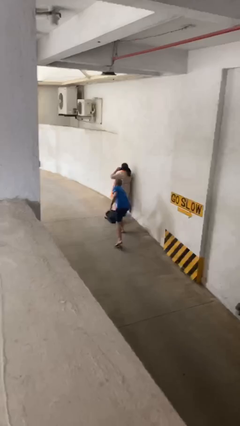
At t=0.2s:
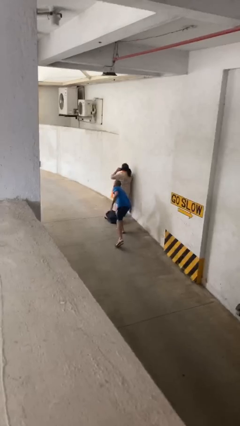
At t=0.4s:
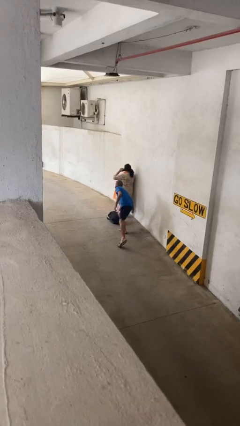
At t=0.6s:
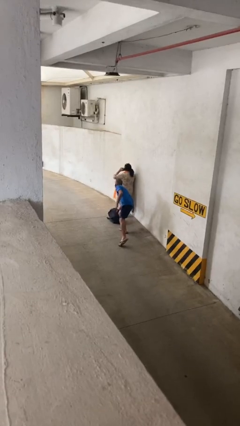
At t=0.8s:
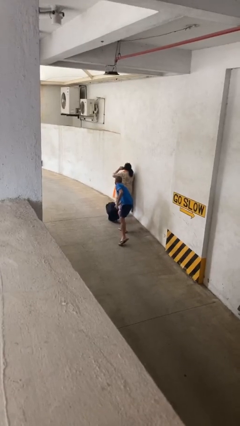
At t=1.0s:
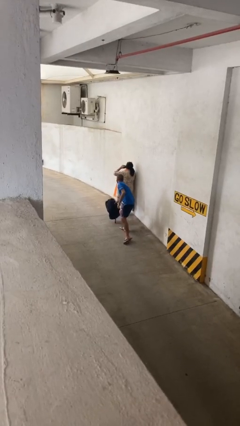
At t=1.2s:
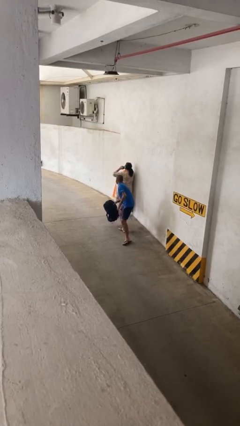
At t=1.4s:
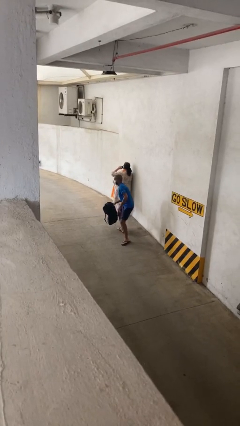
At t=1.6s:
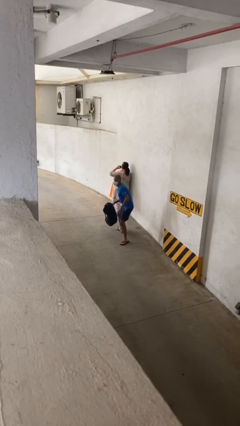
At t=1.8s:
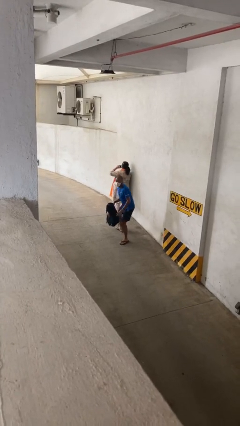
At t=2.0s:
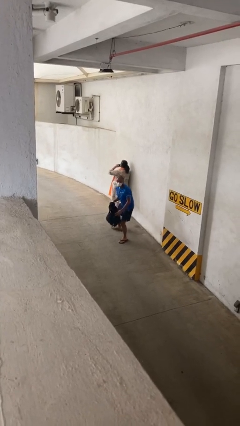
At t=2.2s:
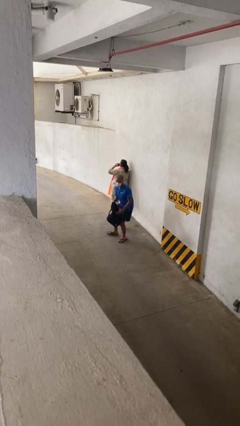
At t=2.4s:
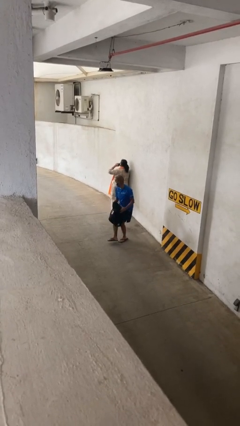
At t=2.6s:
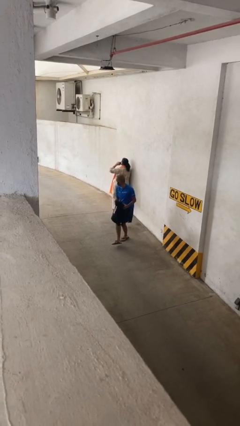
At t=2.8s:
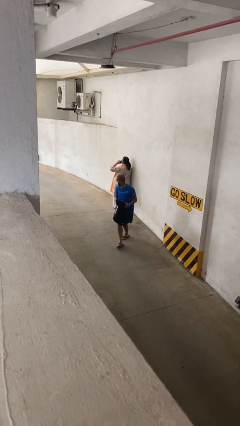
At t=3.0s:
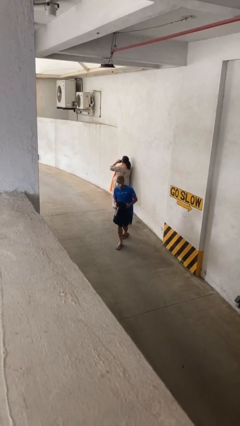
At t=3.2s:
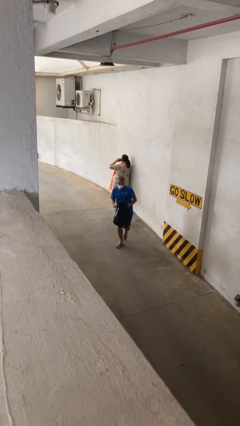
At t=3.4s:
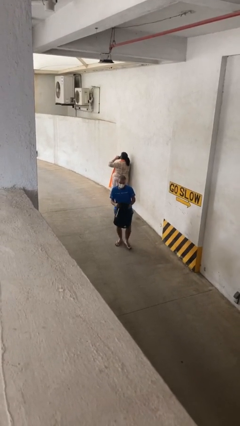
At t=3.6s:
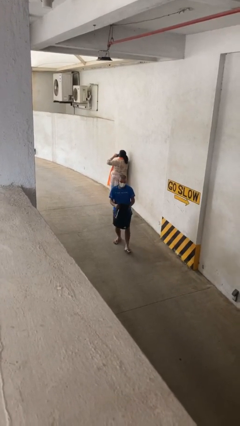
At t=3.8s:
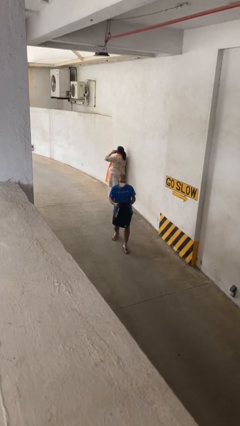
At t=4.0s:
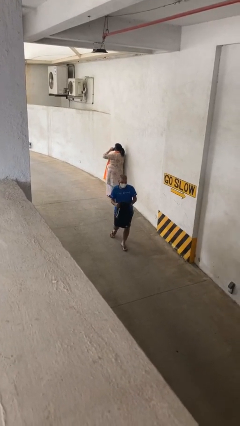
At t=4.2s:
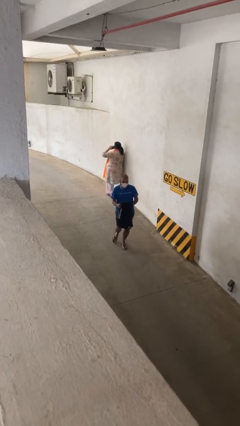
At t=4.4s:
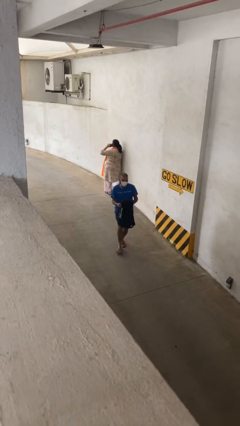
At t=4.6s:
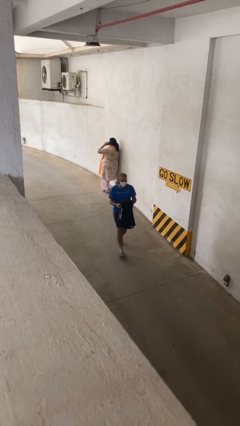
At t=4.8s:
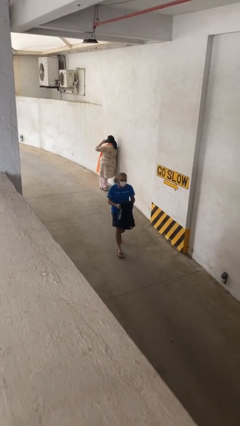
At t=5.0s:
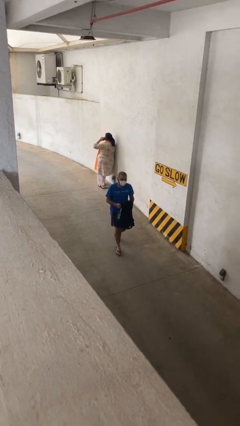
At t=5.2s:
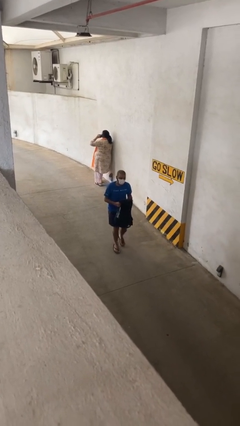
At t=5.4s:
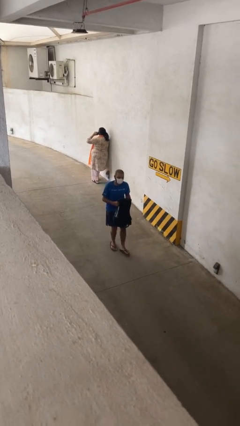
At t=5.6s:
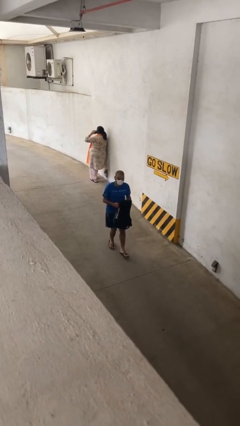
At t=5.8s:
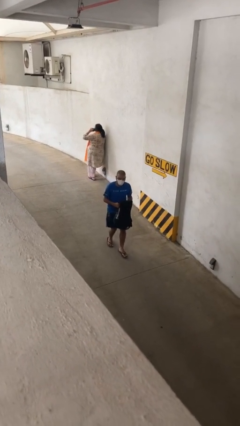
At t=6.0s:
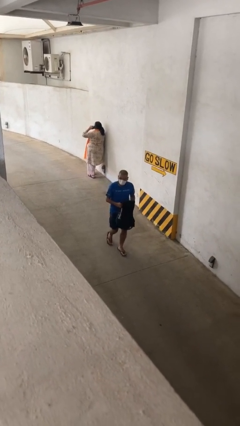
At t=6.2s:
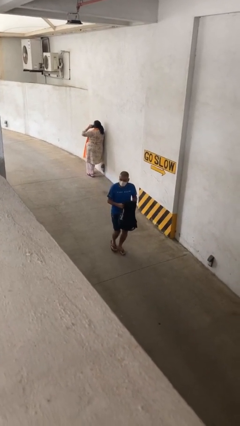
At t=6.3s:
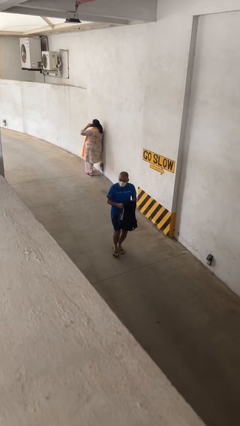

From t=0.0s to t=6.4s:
person steals object from person

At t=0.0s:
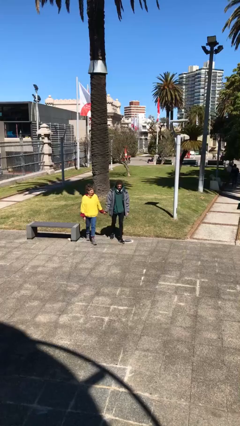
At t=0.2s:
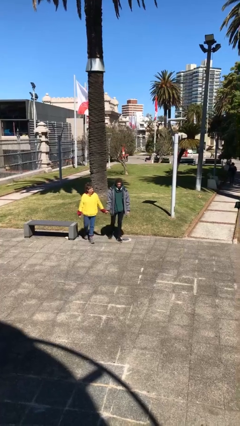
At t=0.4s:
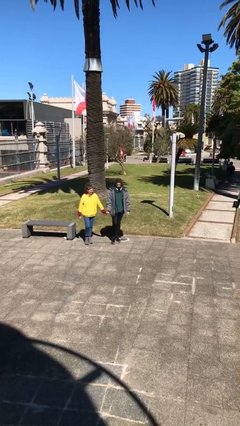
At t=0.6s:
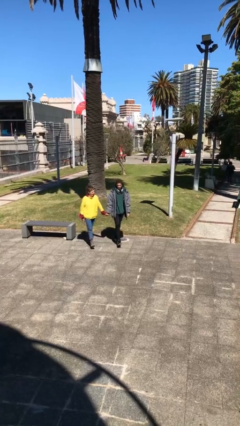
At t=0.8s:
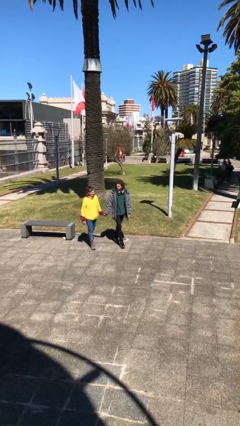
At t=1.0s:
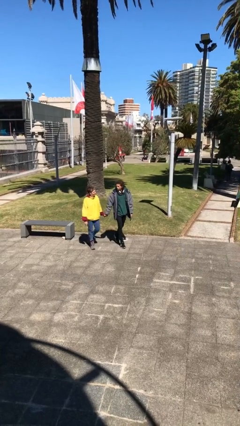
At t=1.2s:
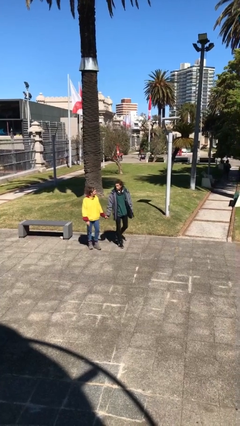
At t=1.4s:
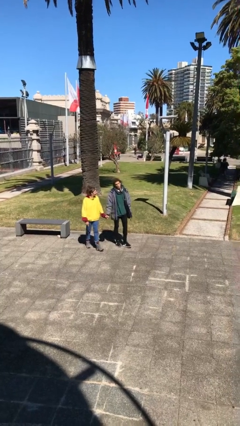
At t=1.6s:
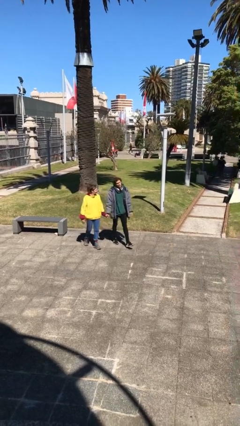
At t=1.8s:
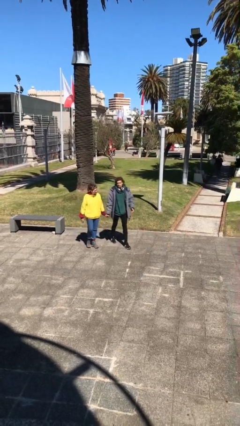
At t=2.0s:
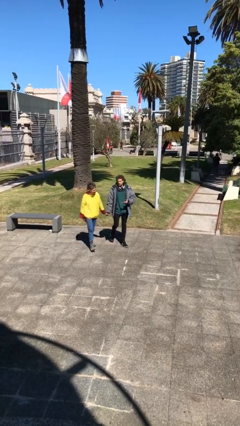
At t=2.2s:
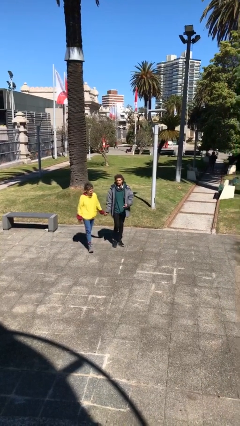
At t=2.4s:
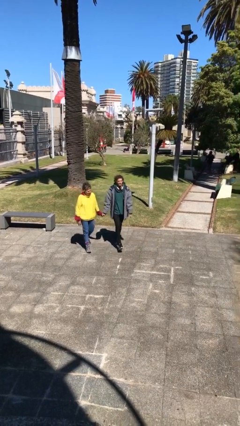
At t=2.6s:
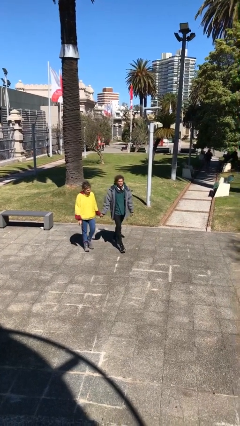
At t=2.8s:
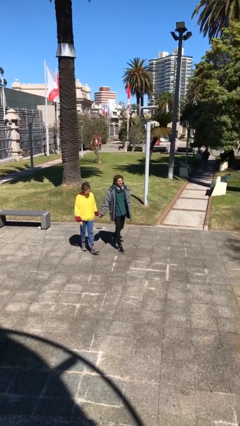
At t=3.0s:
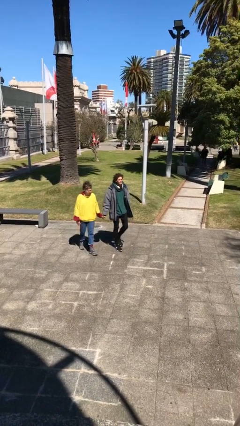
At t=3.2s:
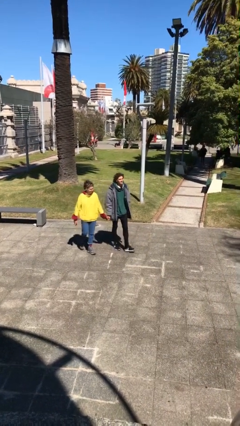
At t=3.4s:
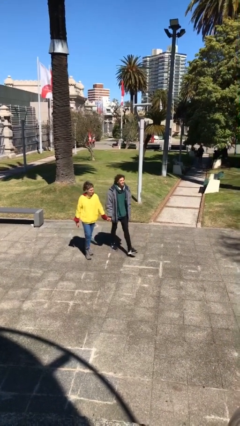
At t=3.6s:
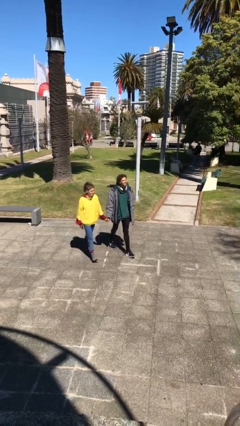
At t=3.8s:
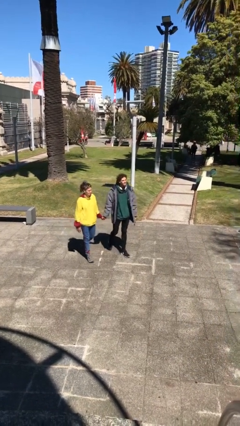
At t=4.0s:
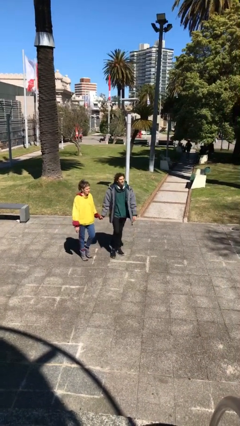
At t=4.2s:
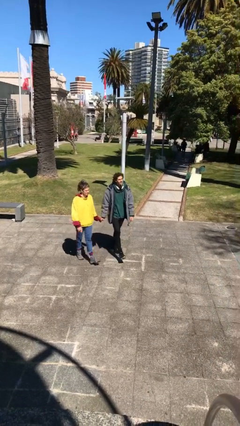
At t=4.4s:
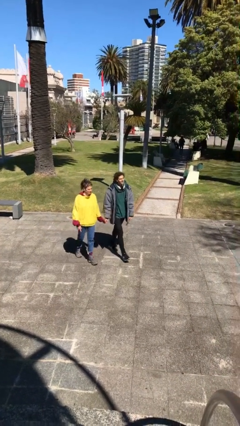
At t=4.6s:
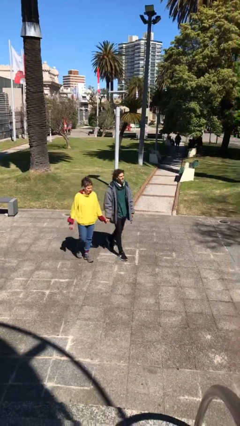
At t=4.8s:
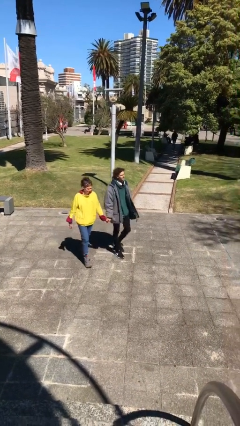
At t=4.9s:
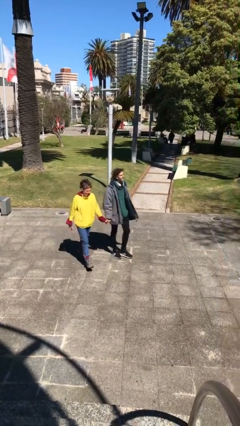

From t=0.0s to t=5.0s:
person holds hand

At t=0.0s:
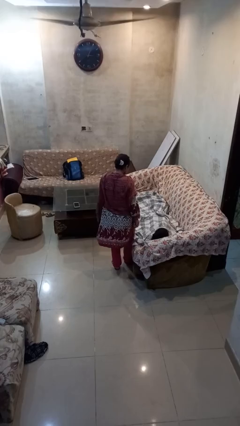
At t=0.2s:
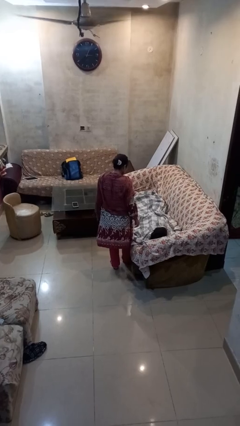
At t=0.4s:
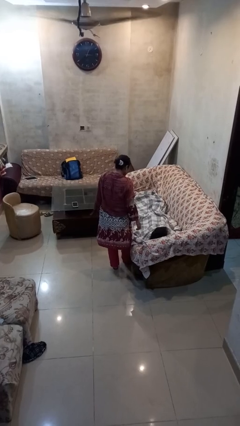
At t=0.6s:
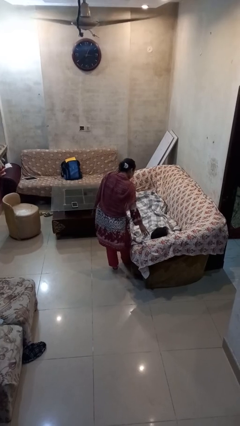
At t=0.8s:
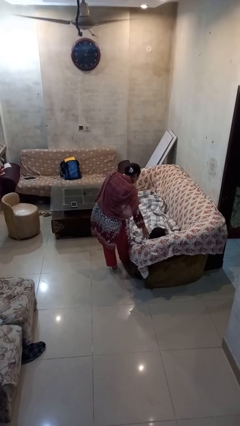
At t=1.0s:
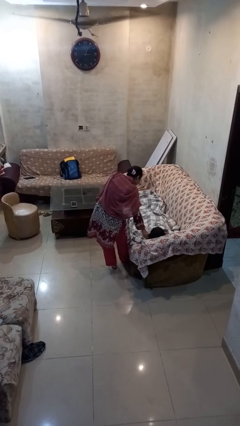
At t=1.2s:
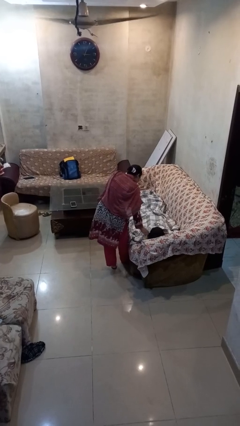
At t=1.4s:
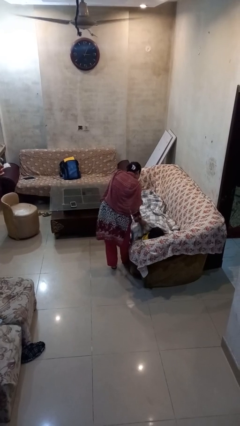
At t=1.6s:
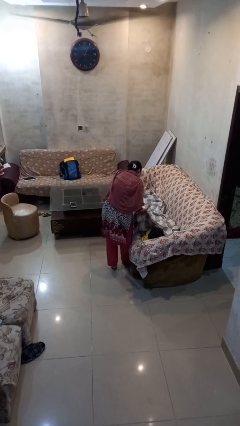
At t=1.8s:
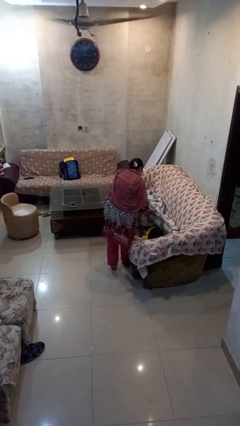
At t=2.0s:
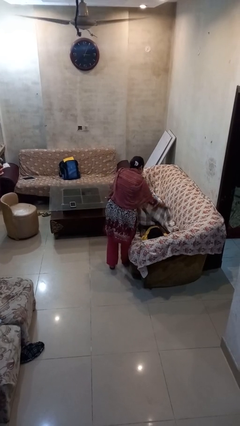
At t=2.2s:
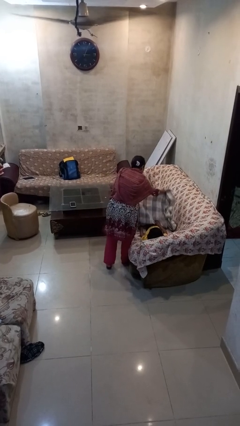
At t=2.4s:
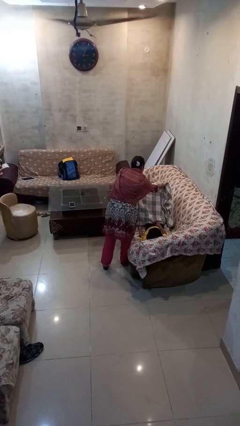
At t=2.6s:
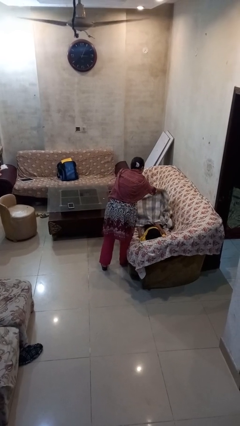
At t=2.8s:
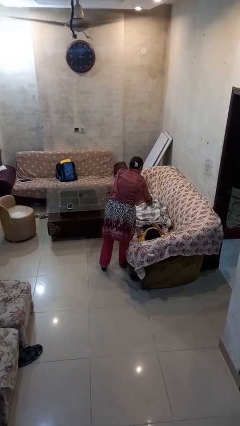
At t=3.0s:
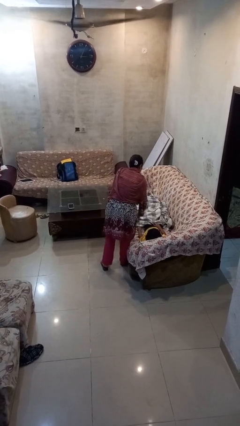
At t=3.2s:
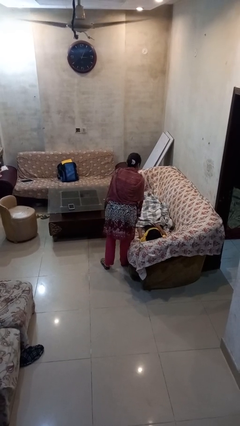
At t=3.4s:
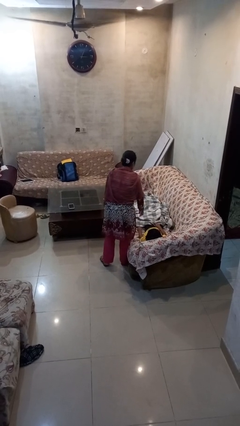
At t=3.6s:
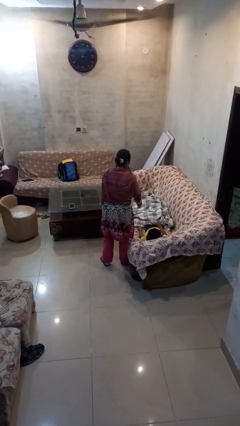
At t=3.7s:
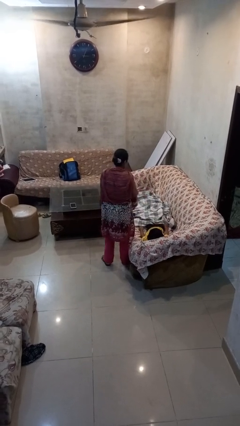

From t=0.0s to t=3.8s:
person uncovers friend with blanket

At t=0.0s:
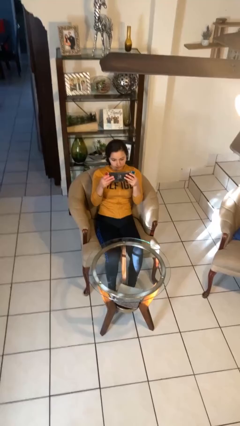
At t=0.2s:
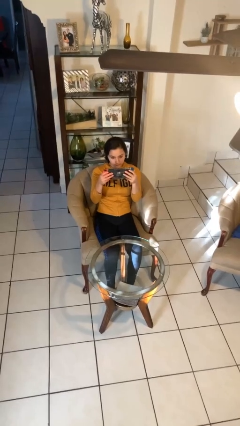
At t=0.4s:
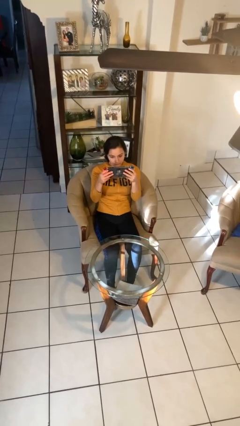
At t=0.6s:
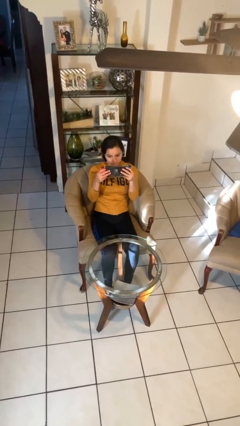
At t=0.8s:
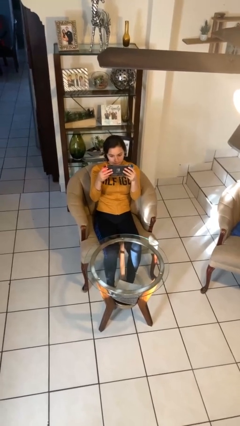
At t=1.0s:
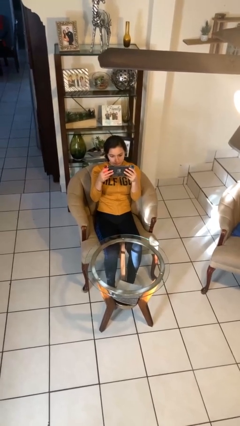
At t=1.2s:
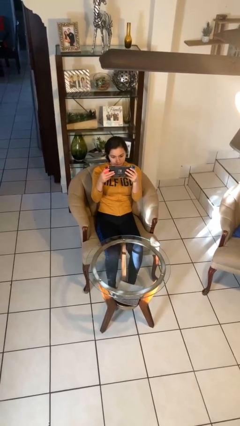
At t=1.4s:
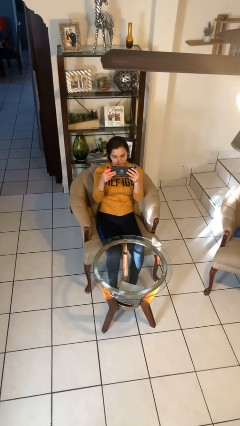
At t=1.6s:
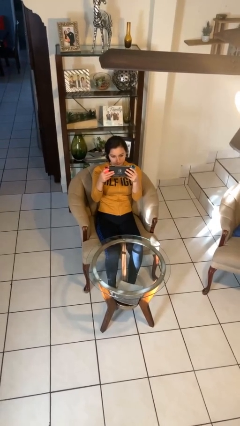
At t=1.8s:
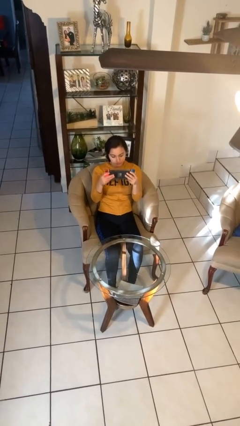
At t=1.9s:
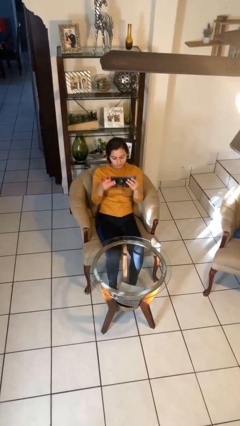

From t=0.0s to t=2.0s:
person interacts with handheld game

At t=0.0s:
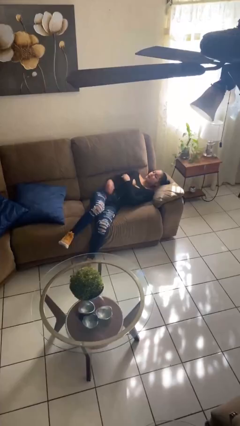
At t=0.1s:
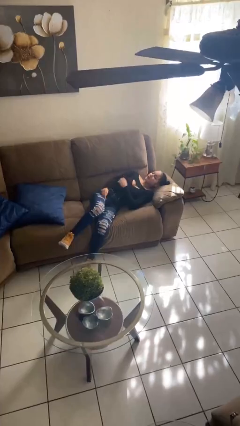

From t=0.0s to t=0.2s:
person lies down on bed
